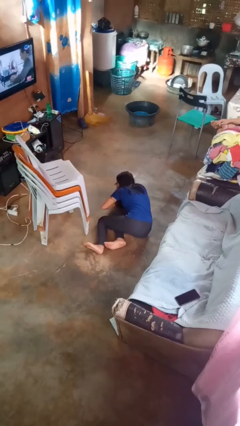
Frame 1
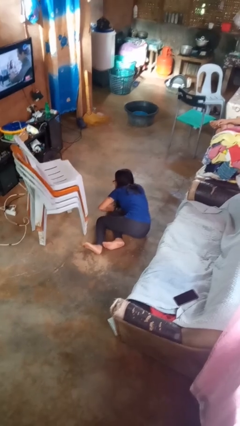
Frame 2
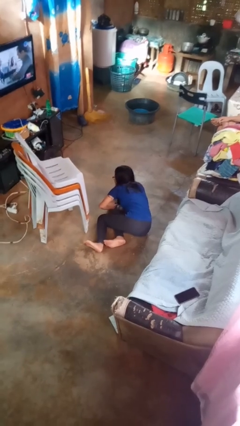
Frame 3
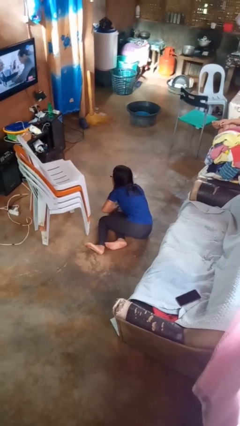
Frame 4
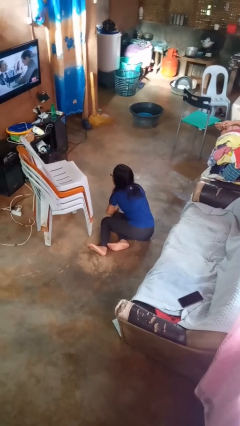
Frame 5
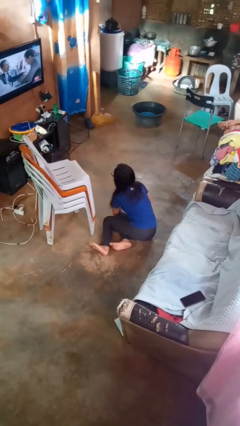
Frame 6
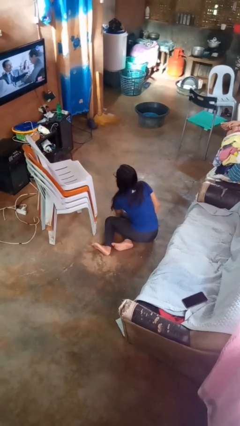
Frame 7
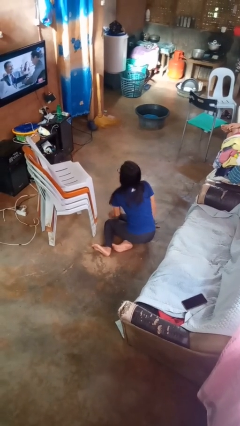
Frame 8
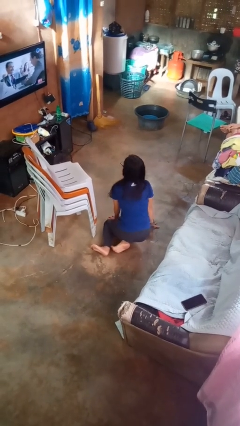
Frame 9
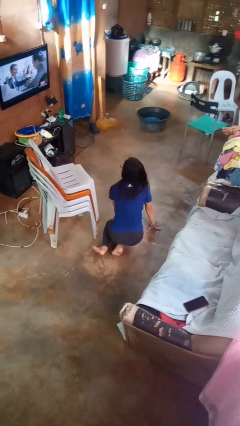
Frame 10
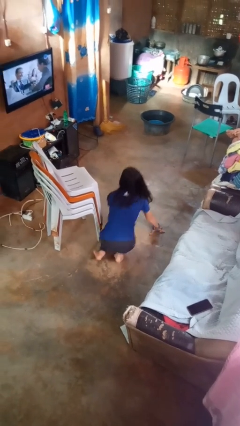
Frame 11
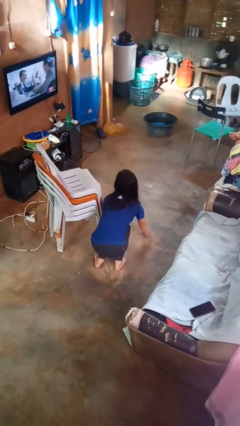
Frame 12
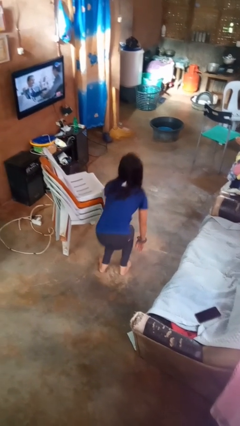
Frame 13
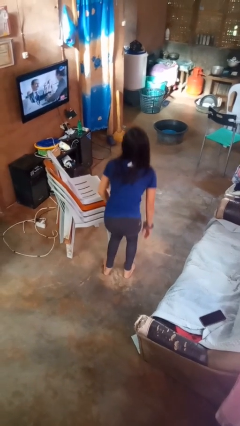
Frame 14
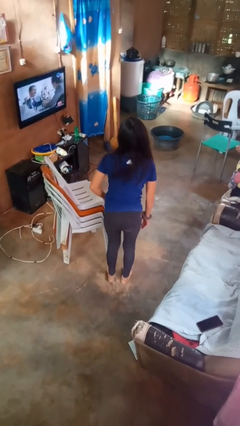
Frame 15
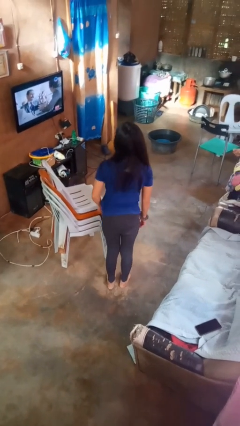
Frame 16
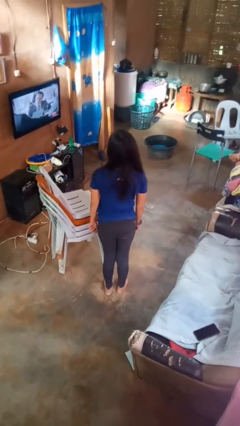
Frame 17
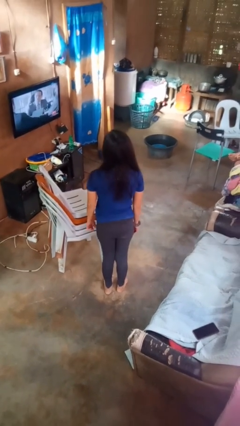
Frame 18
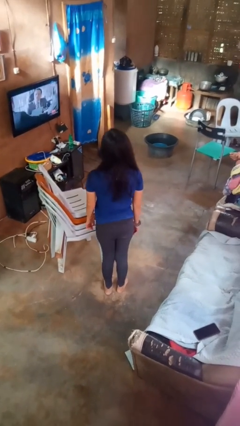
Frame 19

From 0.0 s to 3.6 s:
person stands up from floor

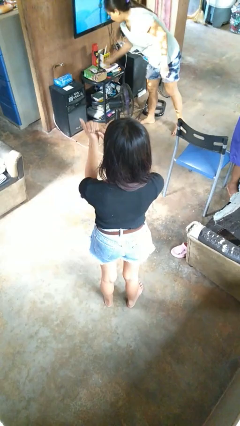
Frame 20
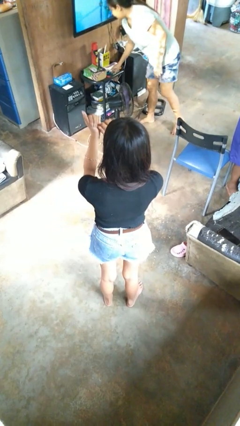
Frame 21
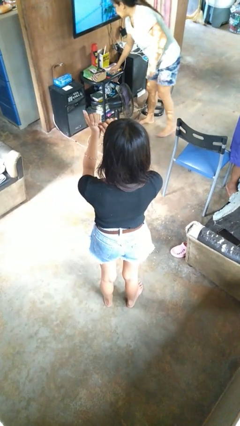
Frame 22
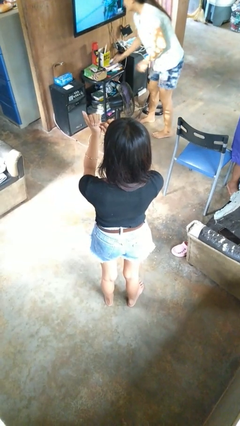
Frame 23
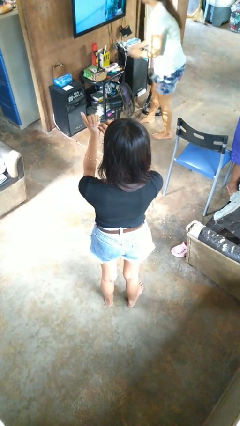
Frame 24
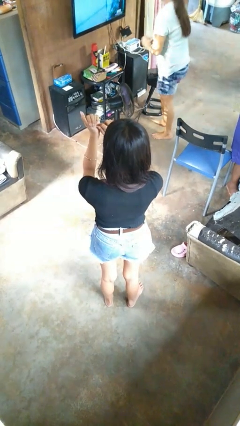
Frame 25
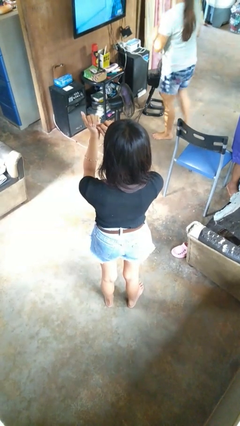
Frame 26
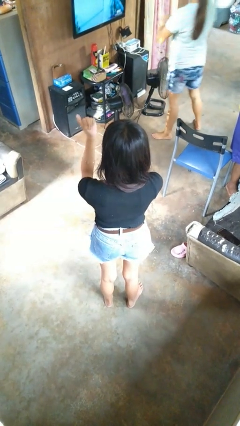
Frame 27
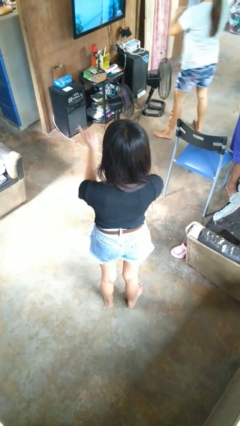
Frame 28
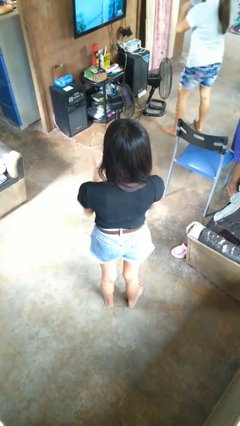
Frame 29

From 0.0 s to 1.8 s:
person files fingernails

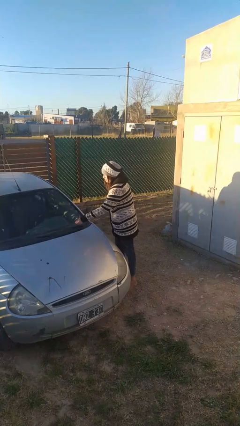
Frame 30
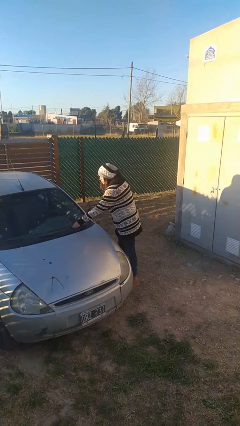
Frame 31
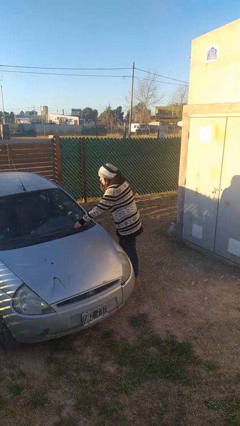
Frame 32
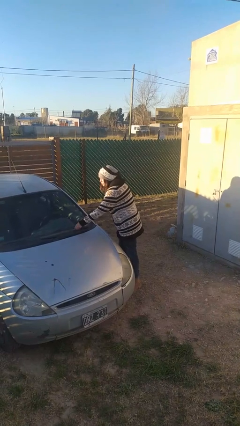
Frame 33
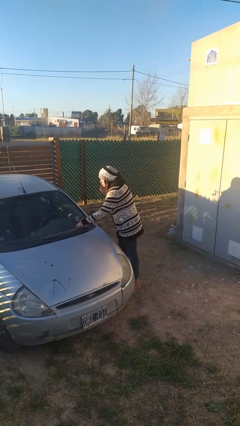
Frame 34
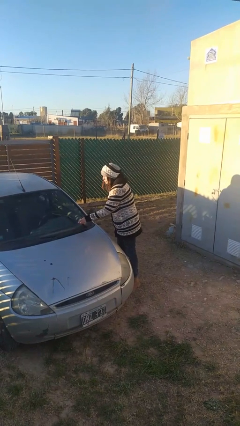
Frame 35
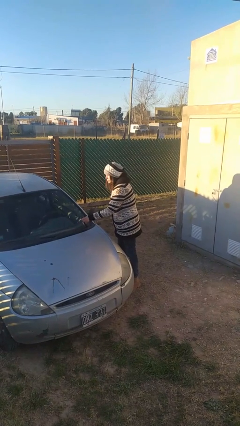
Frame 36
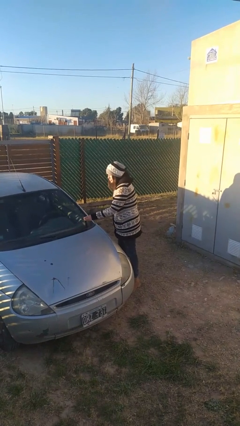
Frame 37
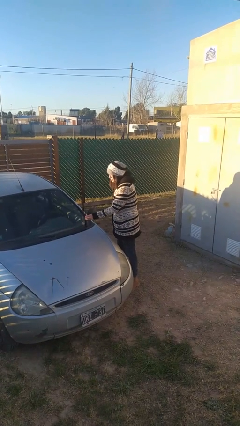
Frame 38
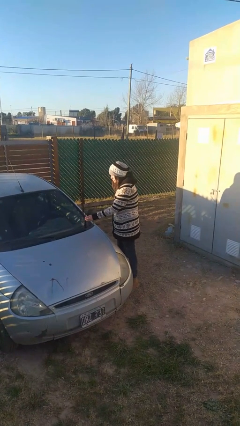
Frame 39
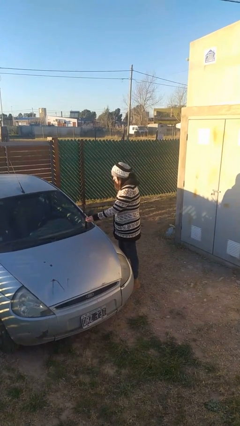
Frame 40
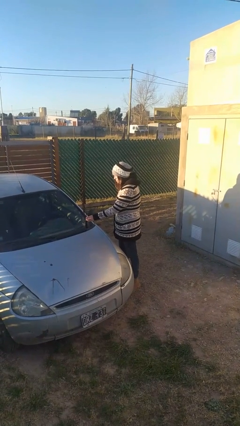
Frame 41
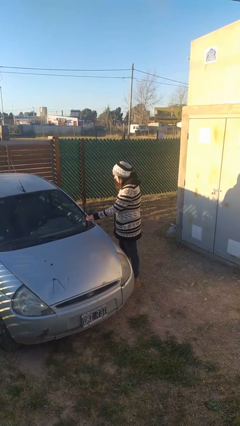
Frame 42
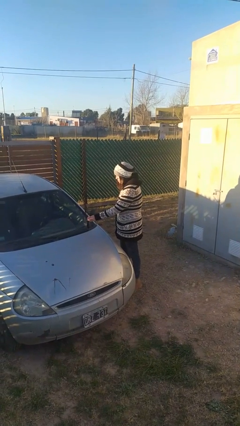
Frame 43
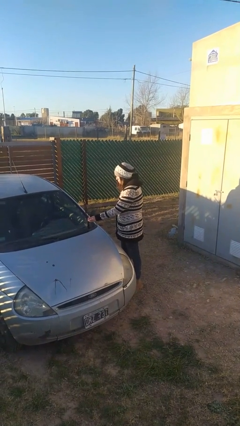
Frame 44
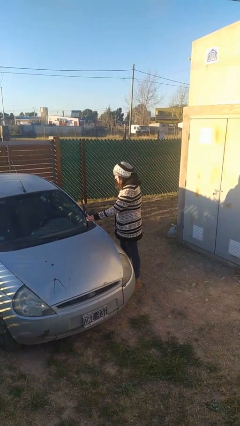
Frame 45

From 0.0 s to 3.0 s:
person flips up car wipers

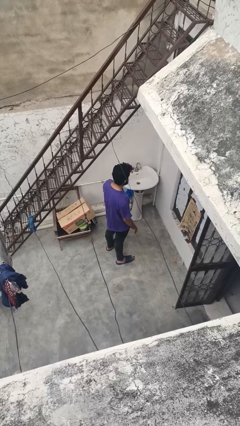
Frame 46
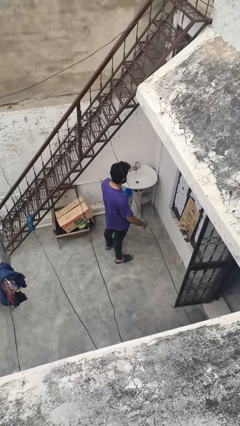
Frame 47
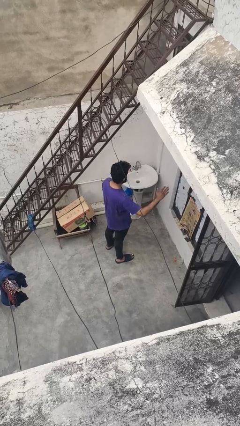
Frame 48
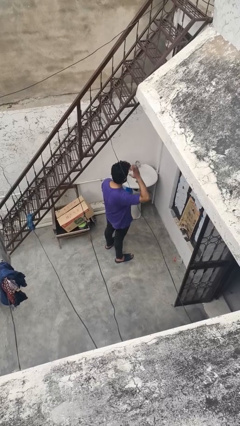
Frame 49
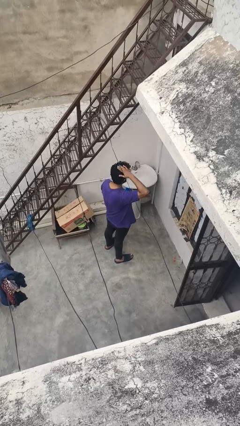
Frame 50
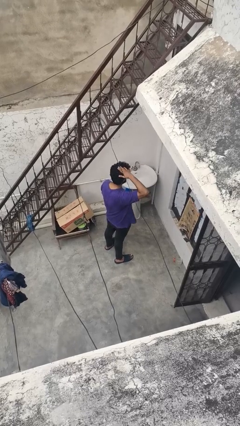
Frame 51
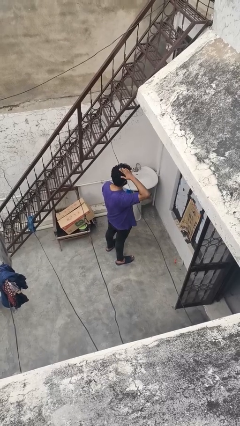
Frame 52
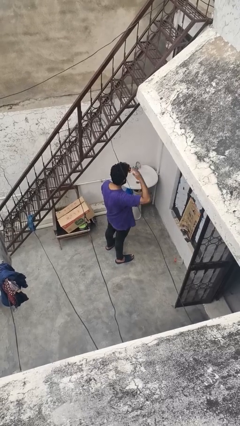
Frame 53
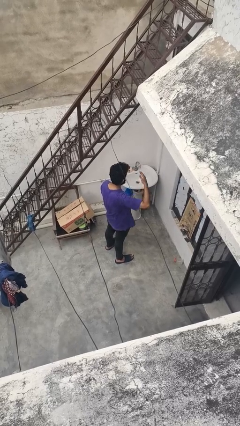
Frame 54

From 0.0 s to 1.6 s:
person pats head

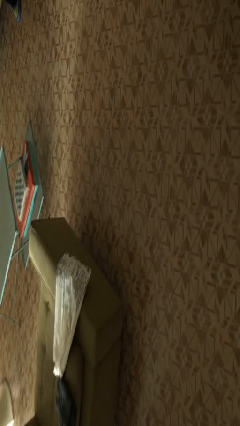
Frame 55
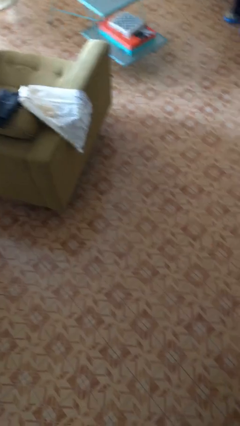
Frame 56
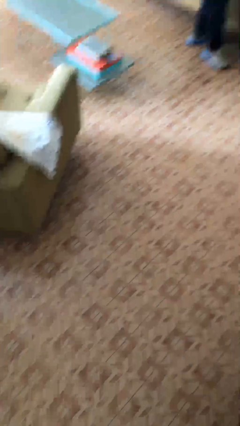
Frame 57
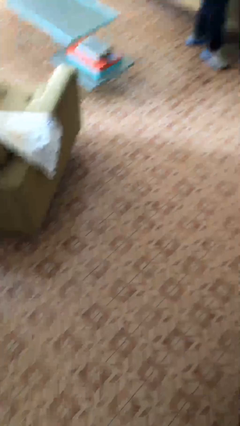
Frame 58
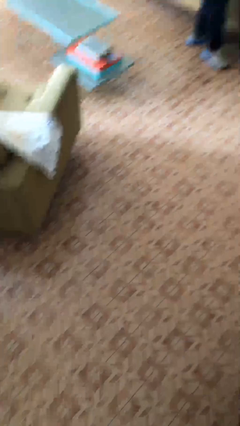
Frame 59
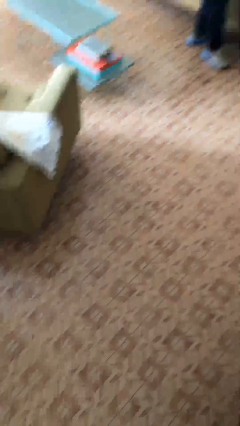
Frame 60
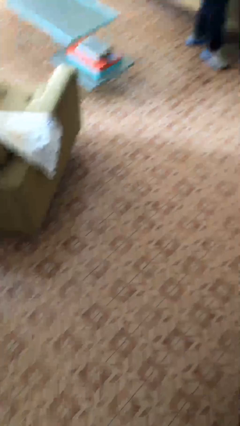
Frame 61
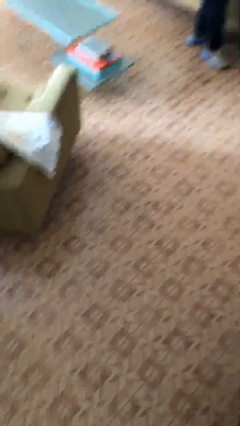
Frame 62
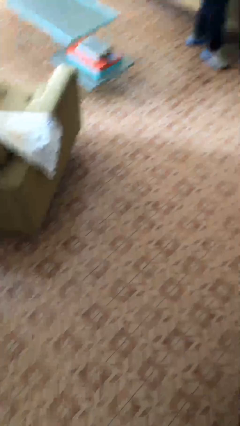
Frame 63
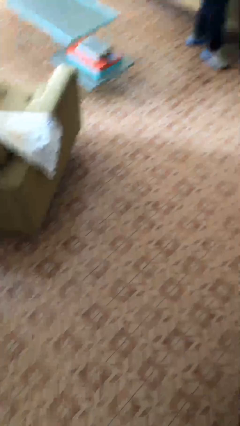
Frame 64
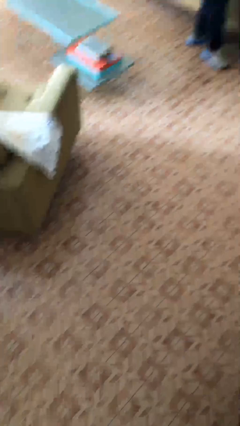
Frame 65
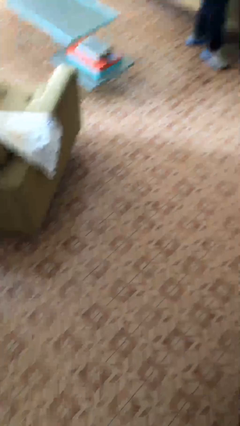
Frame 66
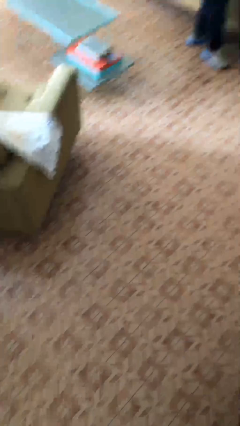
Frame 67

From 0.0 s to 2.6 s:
person searches in box

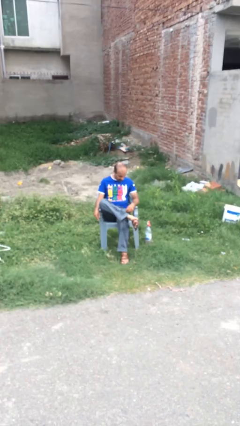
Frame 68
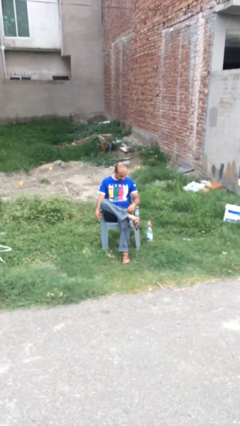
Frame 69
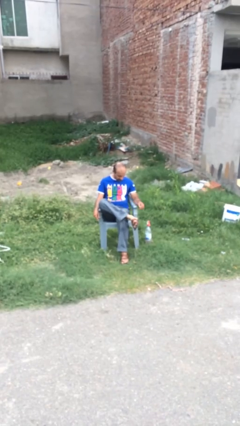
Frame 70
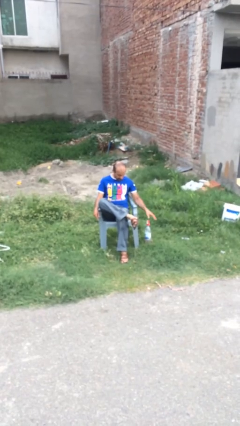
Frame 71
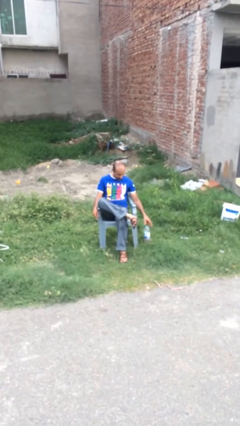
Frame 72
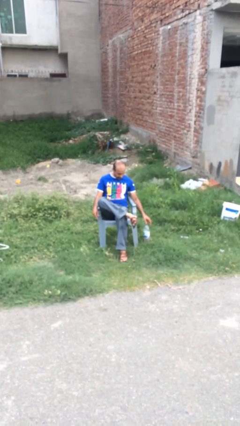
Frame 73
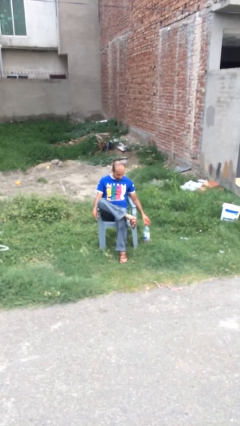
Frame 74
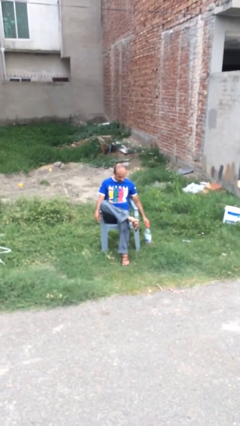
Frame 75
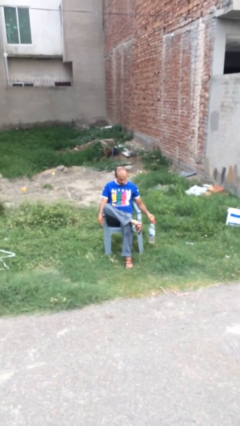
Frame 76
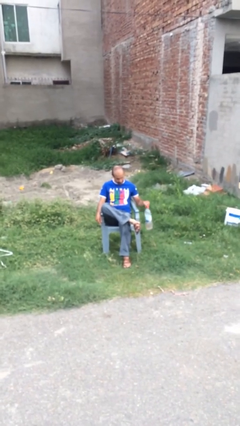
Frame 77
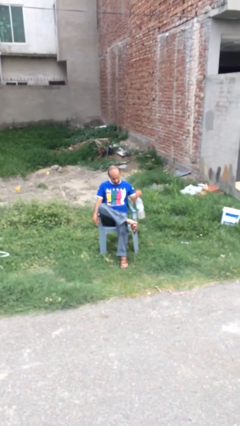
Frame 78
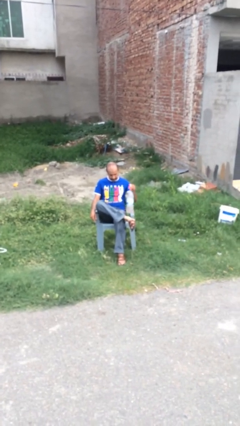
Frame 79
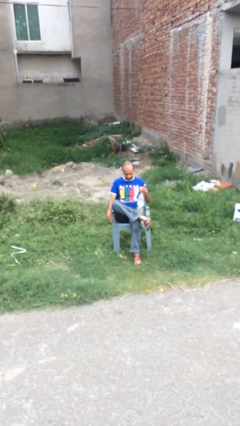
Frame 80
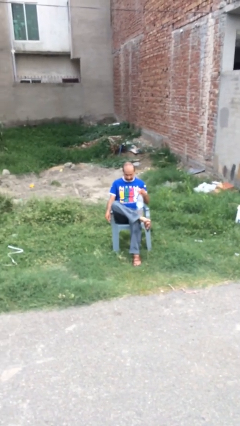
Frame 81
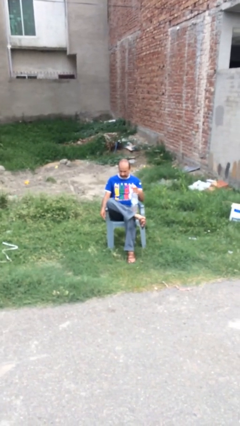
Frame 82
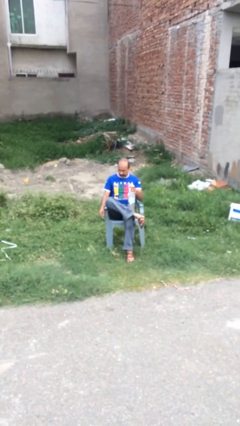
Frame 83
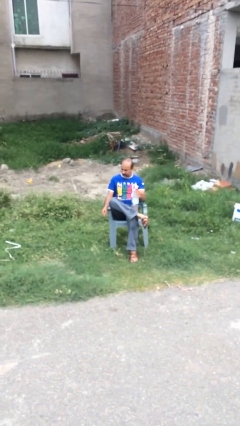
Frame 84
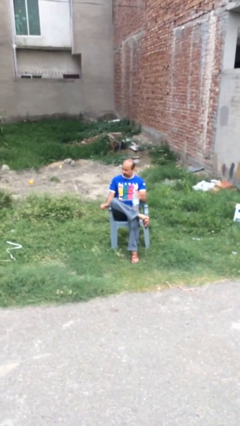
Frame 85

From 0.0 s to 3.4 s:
person picks up object from floor

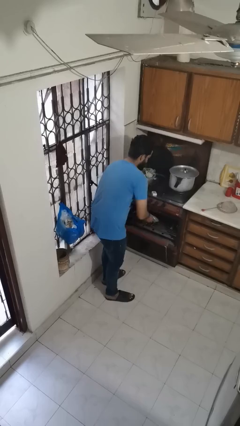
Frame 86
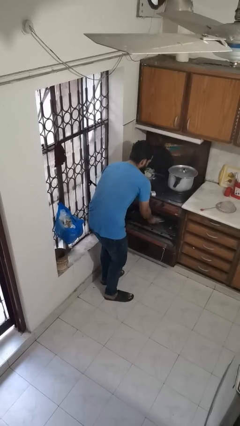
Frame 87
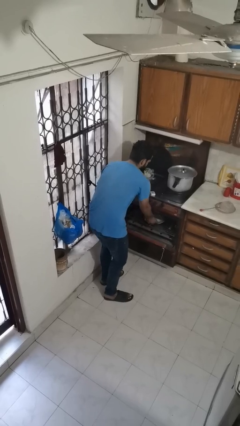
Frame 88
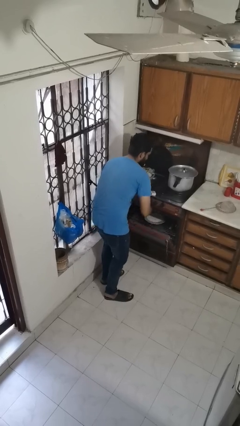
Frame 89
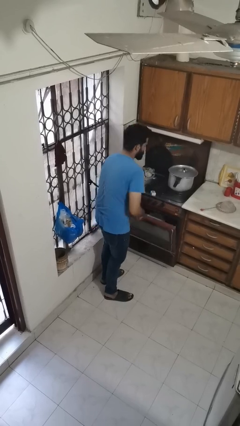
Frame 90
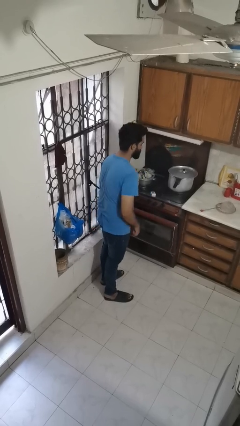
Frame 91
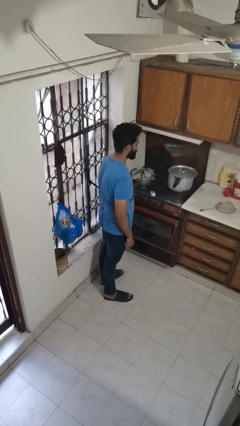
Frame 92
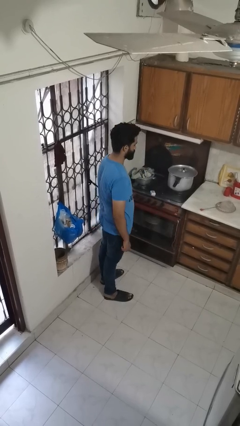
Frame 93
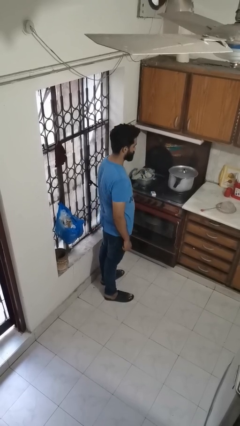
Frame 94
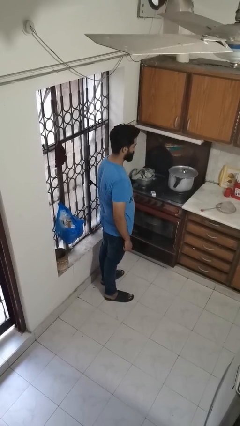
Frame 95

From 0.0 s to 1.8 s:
person puts object into oven
